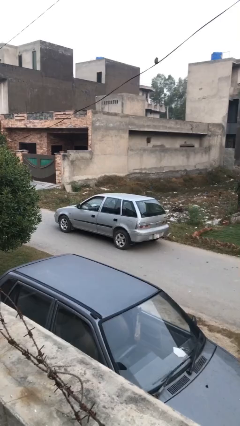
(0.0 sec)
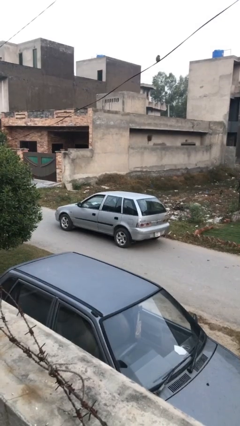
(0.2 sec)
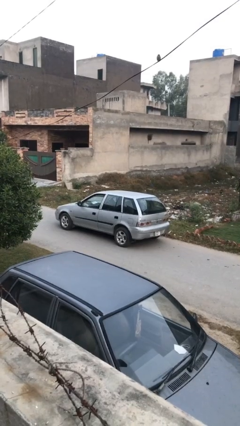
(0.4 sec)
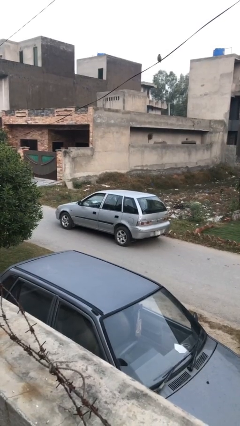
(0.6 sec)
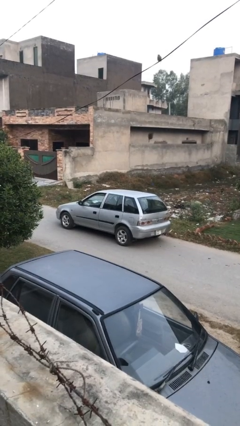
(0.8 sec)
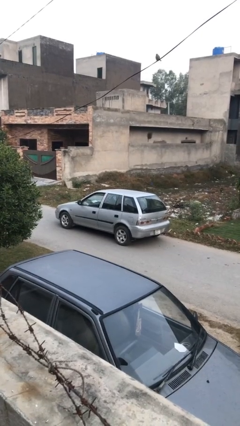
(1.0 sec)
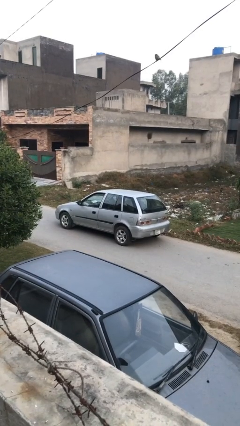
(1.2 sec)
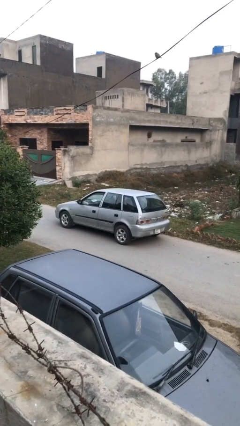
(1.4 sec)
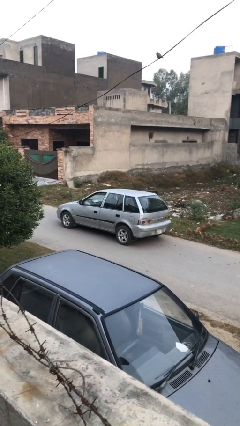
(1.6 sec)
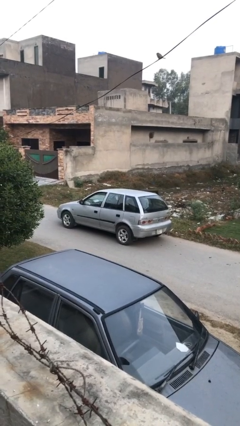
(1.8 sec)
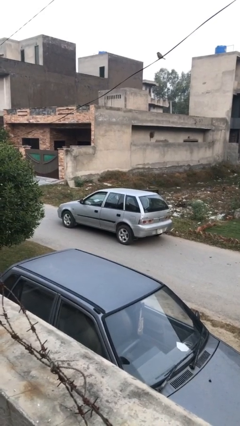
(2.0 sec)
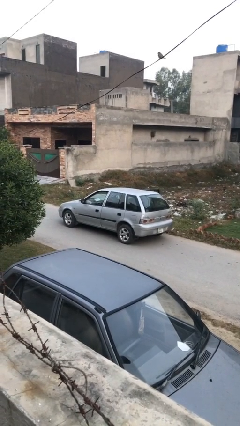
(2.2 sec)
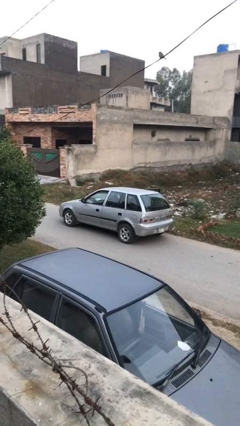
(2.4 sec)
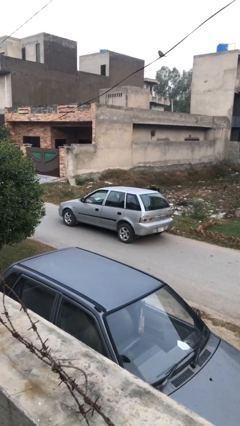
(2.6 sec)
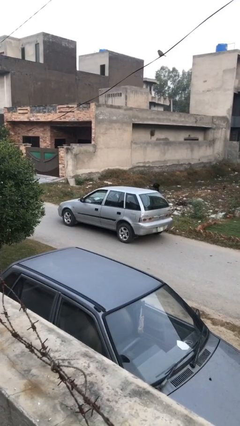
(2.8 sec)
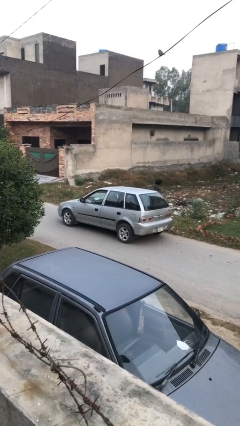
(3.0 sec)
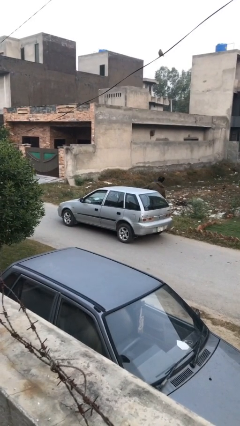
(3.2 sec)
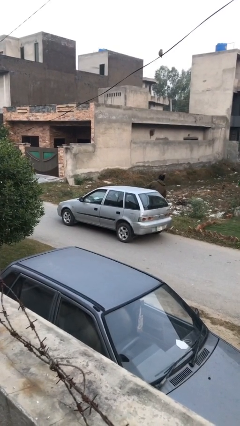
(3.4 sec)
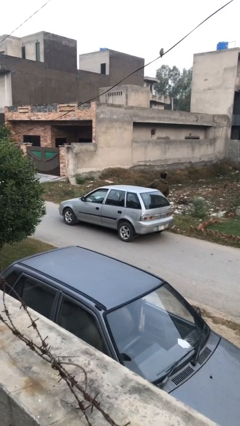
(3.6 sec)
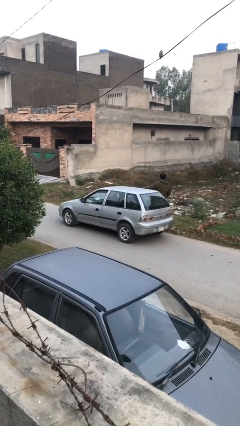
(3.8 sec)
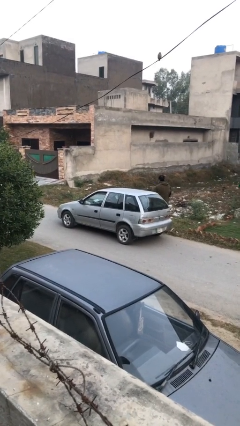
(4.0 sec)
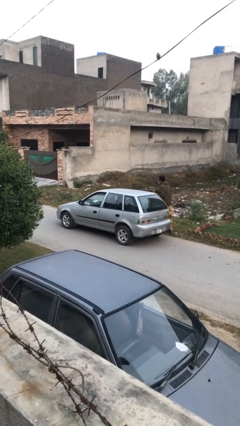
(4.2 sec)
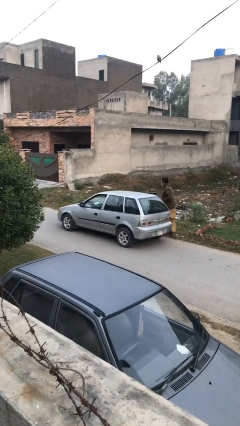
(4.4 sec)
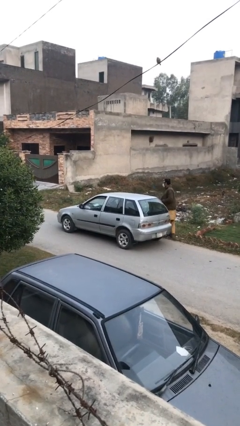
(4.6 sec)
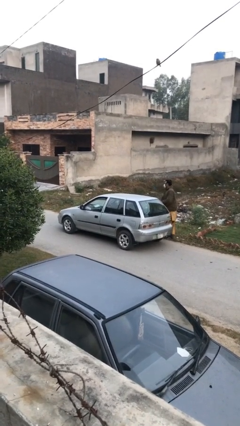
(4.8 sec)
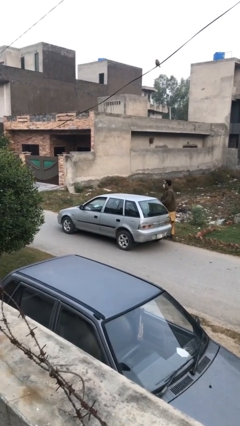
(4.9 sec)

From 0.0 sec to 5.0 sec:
car drops off person

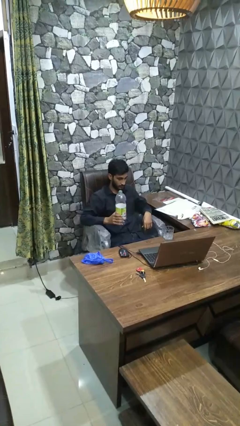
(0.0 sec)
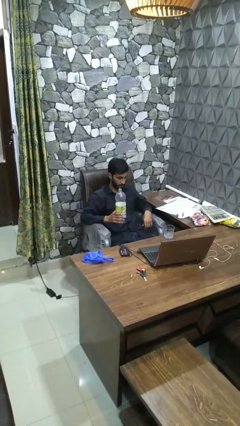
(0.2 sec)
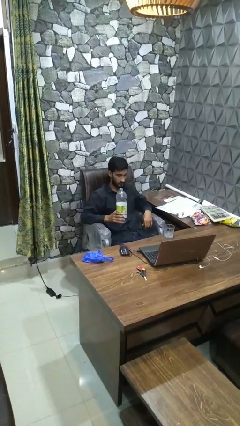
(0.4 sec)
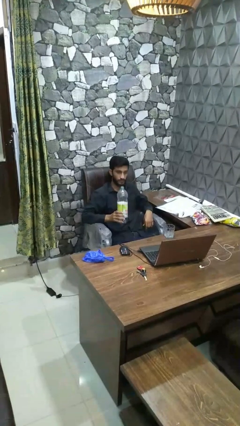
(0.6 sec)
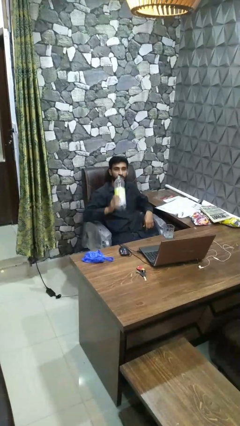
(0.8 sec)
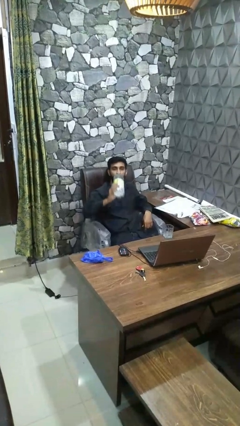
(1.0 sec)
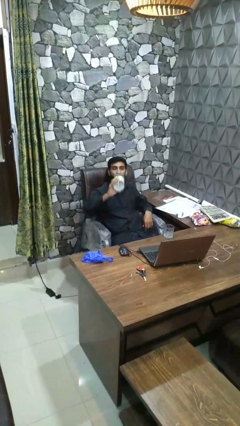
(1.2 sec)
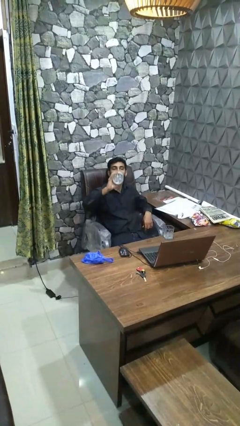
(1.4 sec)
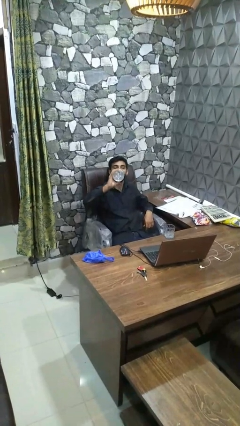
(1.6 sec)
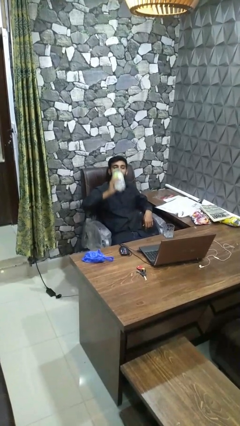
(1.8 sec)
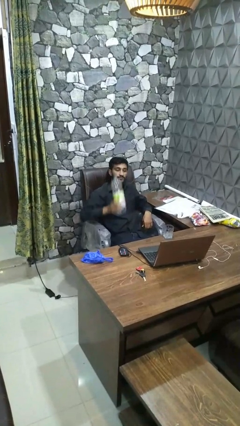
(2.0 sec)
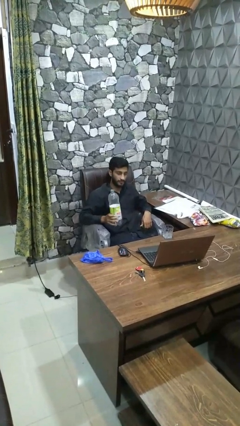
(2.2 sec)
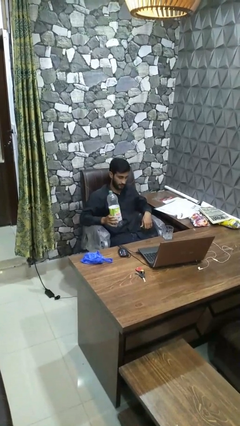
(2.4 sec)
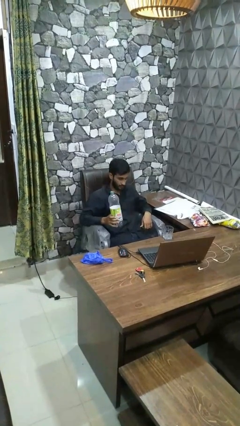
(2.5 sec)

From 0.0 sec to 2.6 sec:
person drinks from bottle

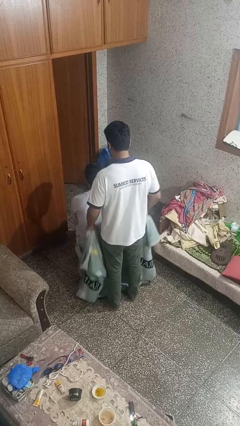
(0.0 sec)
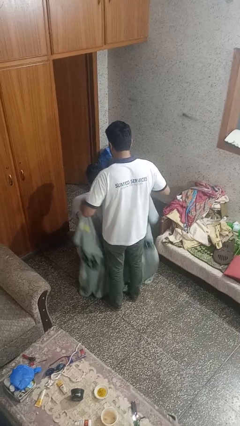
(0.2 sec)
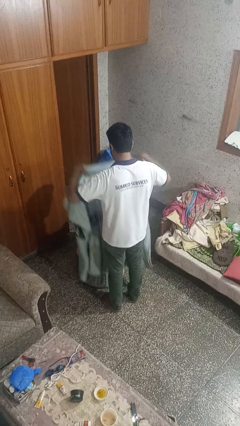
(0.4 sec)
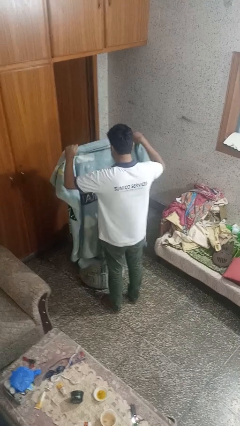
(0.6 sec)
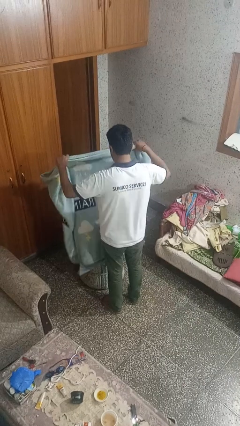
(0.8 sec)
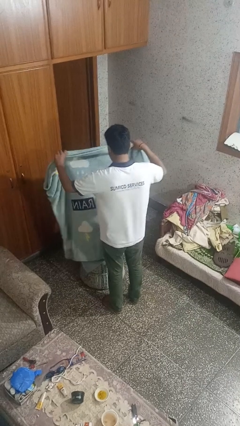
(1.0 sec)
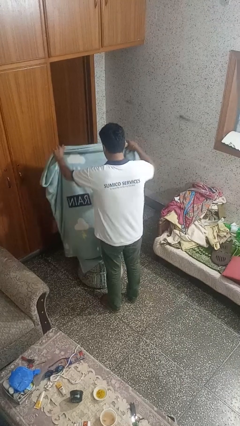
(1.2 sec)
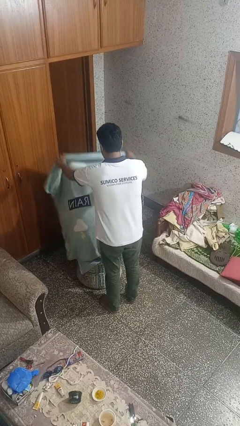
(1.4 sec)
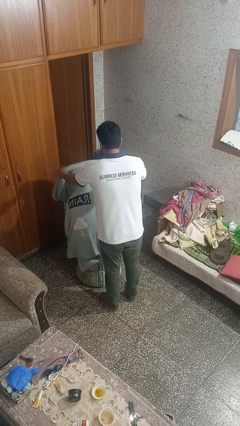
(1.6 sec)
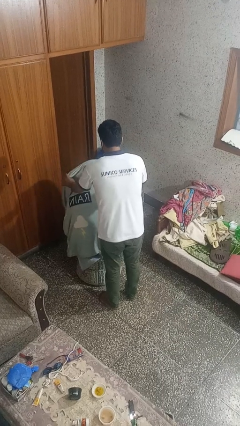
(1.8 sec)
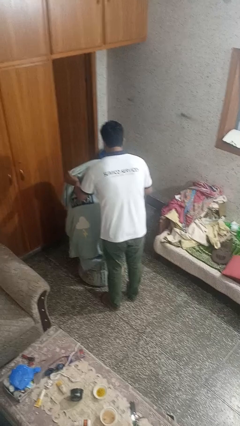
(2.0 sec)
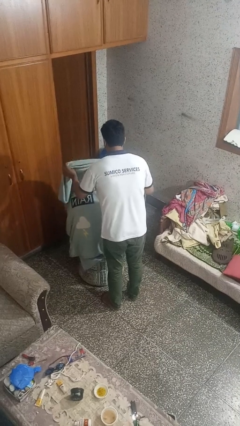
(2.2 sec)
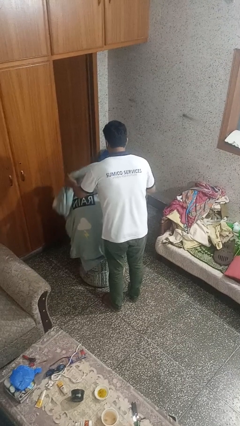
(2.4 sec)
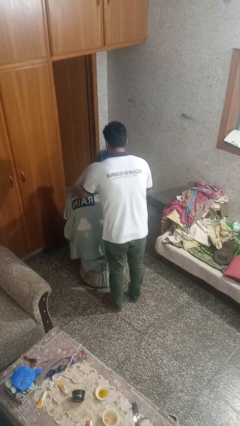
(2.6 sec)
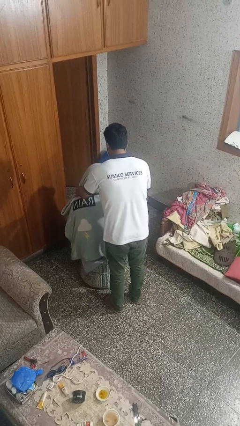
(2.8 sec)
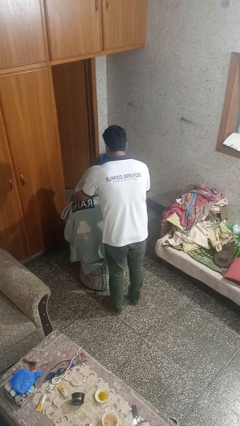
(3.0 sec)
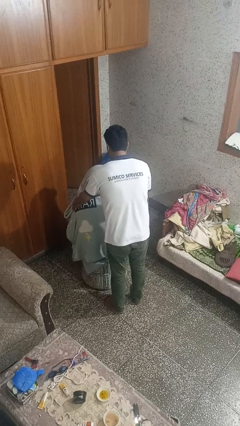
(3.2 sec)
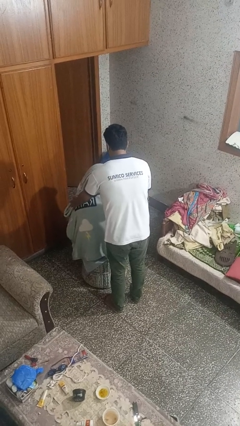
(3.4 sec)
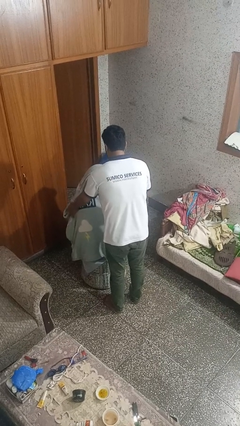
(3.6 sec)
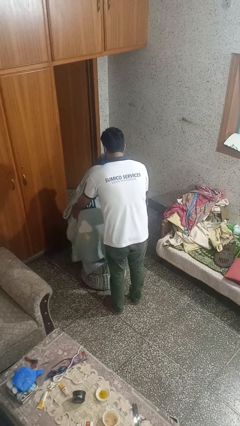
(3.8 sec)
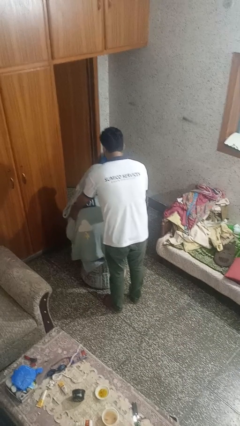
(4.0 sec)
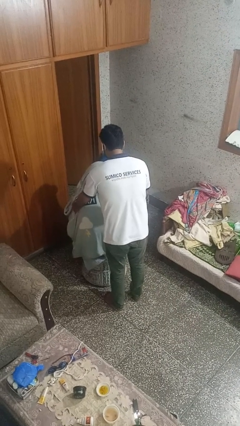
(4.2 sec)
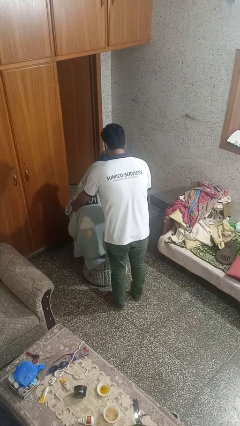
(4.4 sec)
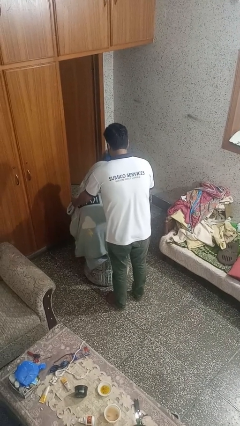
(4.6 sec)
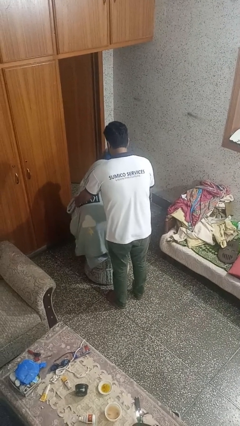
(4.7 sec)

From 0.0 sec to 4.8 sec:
person covers friend with blanket

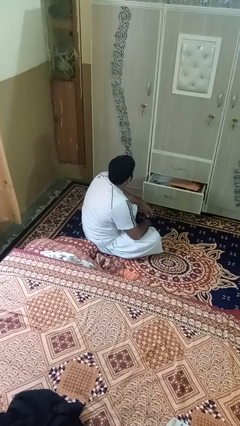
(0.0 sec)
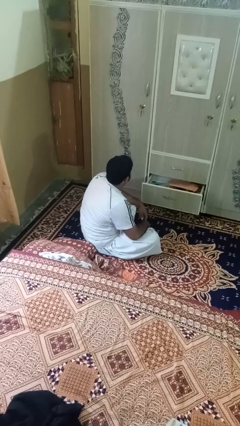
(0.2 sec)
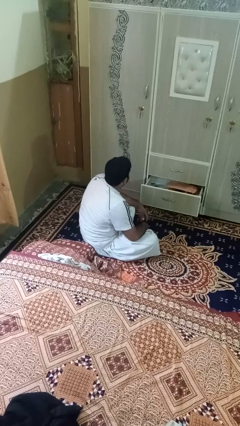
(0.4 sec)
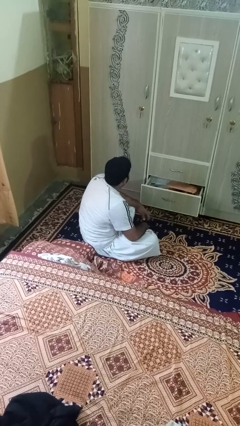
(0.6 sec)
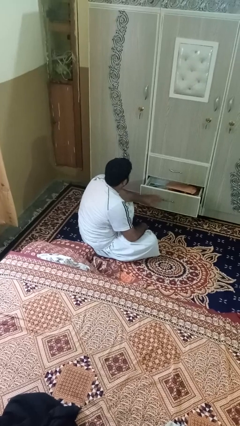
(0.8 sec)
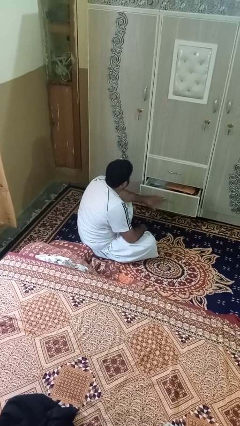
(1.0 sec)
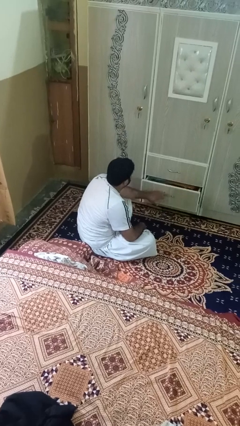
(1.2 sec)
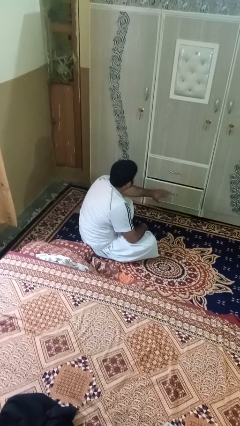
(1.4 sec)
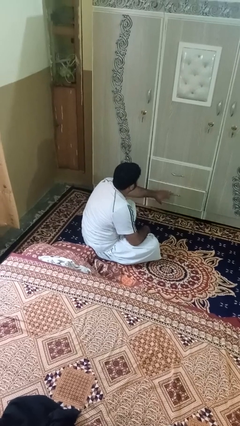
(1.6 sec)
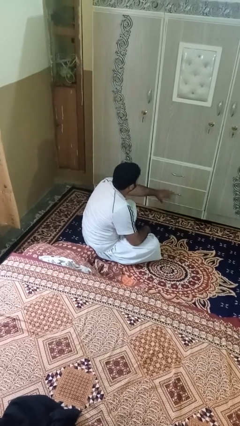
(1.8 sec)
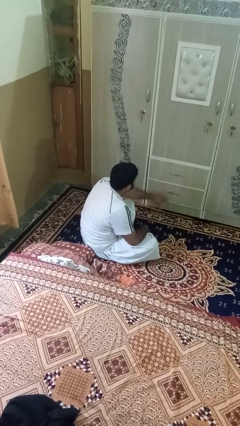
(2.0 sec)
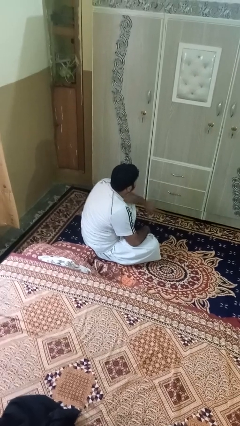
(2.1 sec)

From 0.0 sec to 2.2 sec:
person closes dresser drawer

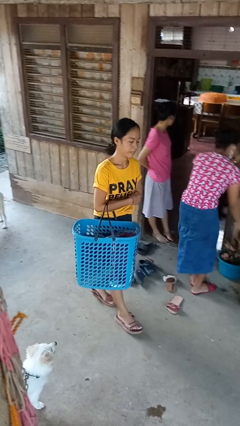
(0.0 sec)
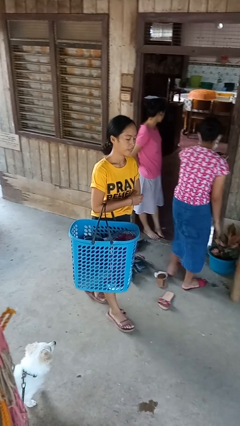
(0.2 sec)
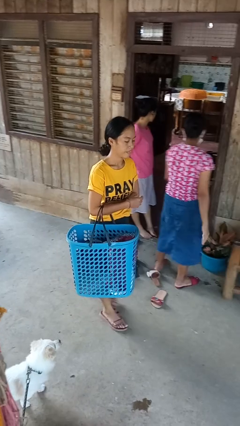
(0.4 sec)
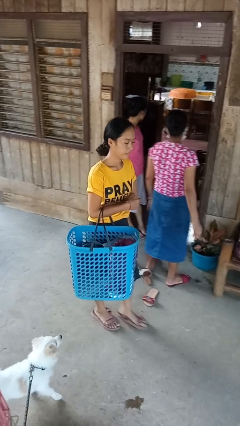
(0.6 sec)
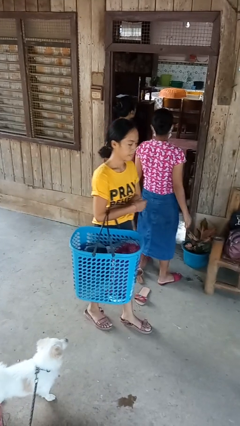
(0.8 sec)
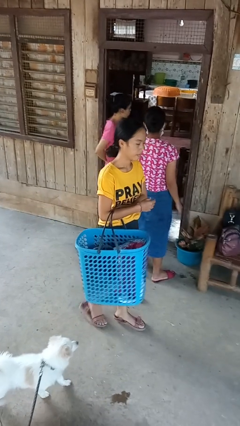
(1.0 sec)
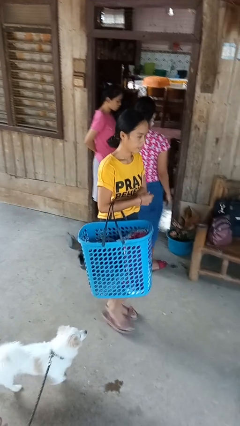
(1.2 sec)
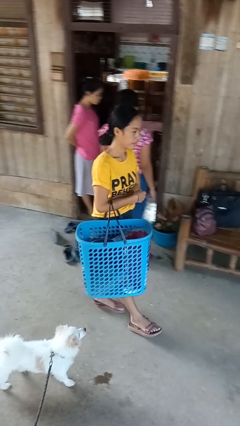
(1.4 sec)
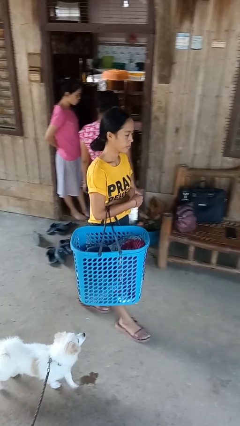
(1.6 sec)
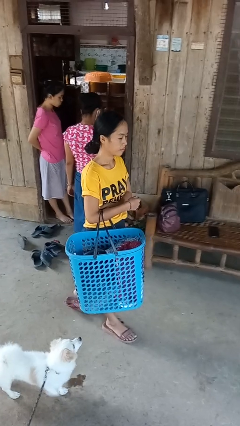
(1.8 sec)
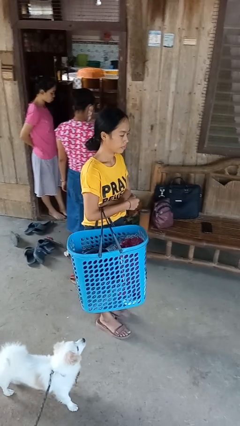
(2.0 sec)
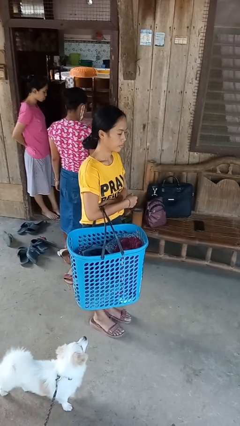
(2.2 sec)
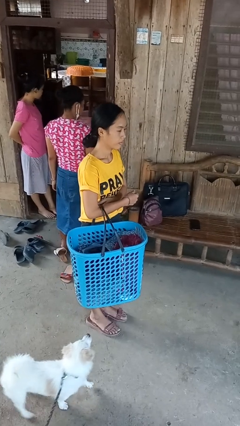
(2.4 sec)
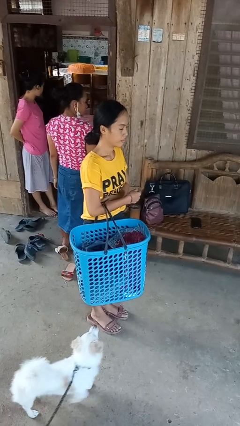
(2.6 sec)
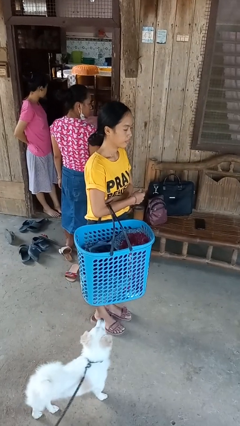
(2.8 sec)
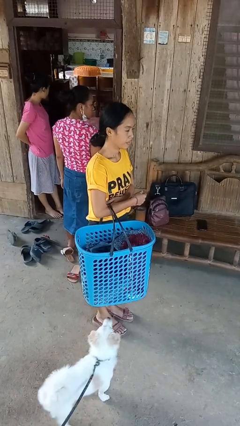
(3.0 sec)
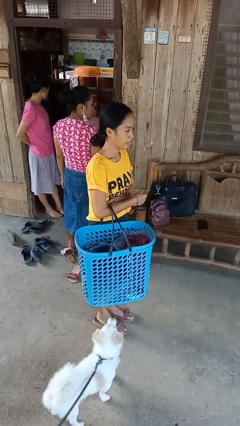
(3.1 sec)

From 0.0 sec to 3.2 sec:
person carries laundry basket
